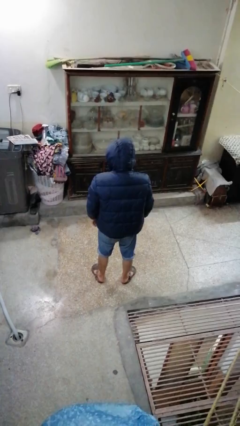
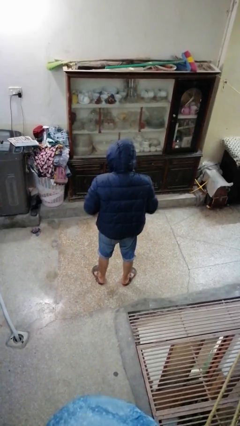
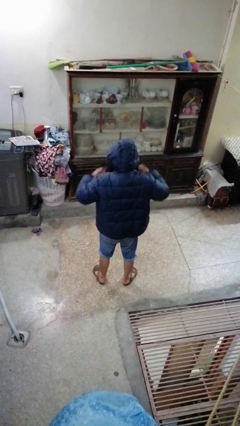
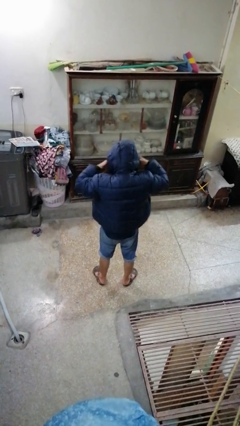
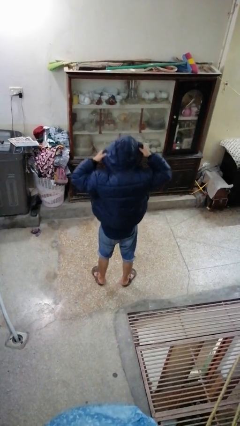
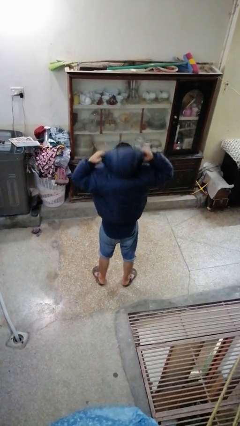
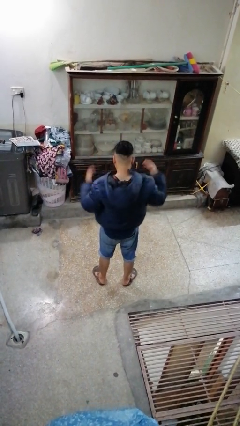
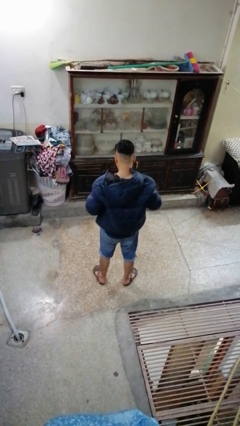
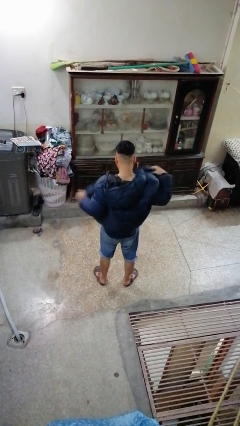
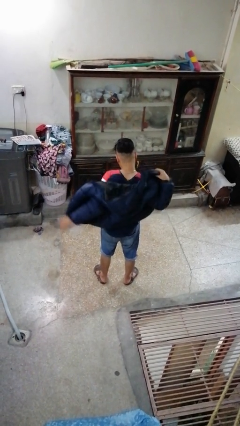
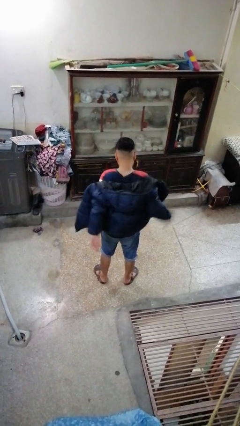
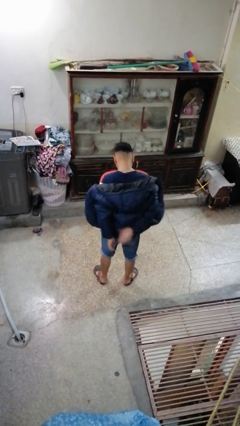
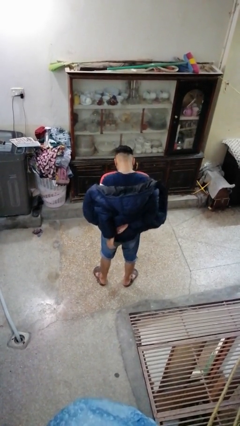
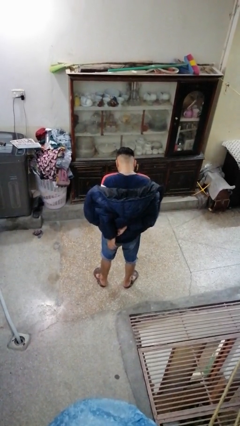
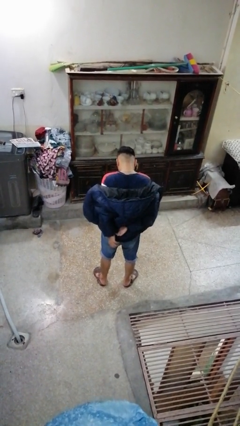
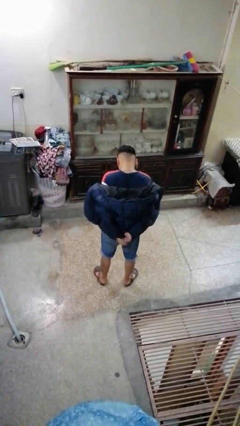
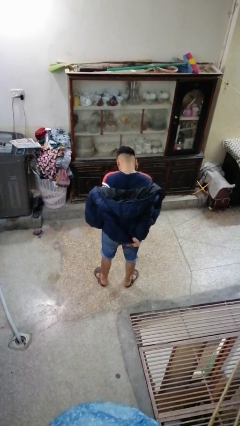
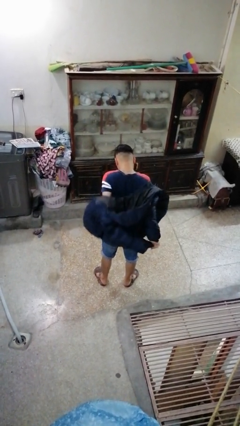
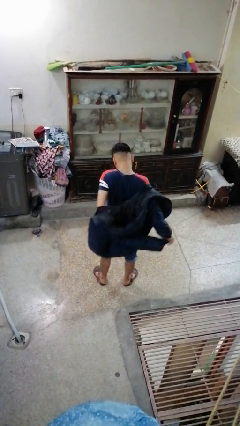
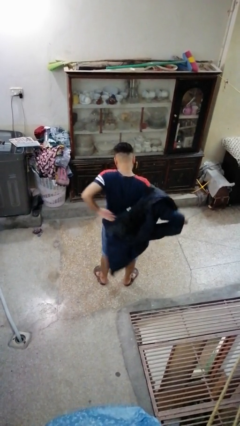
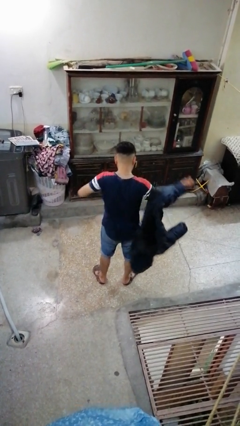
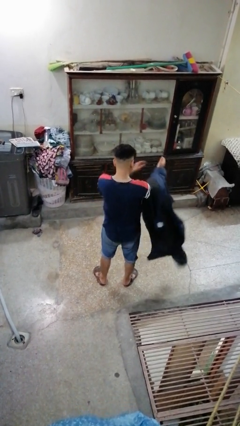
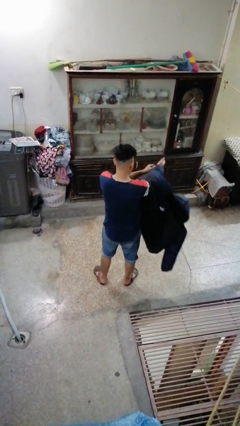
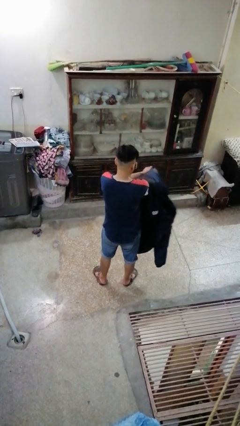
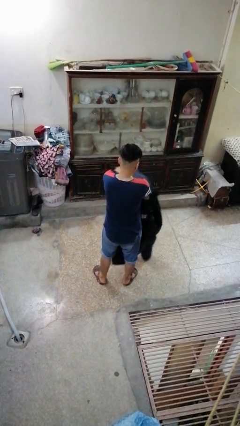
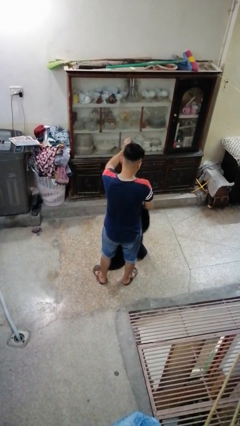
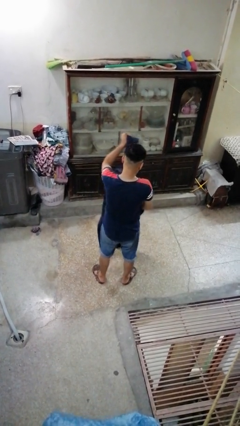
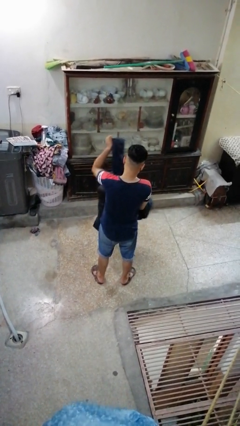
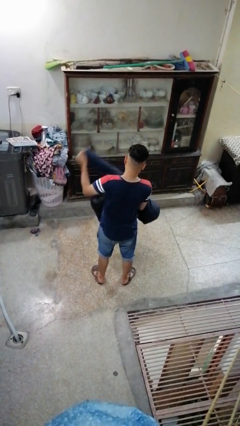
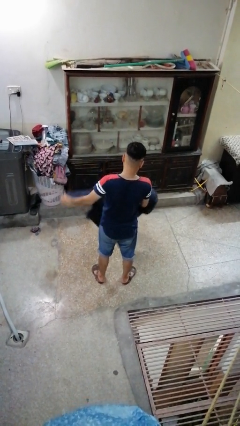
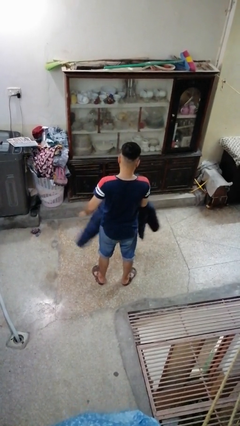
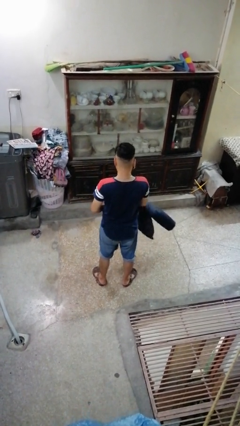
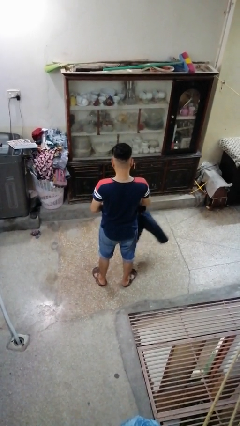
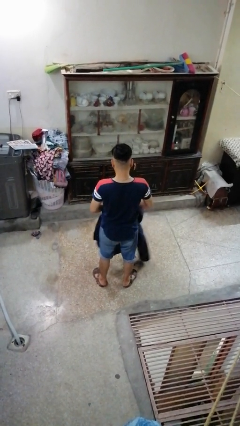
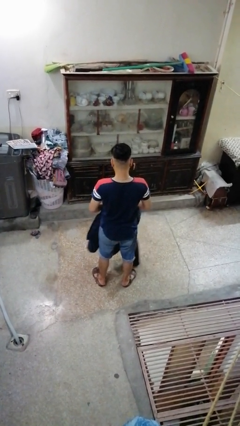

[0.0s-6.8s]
person takes off hoodie

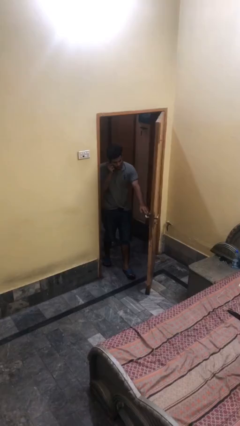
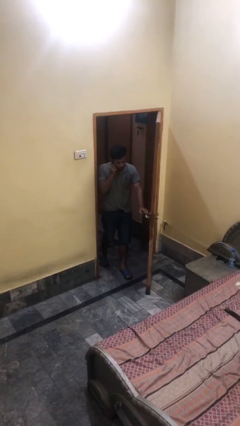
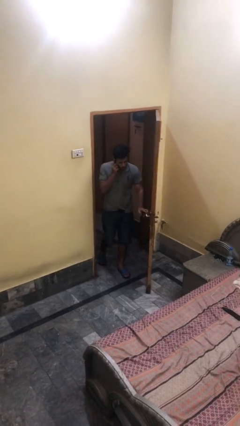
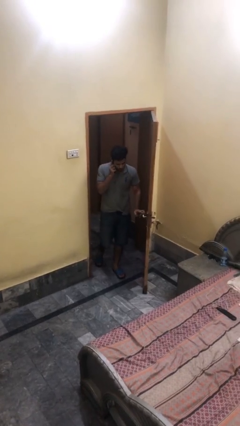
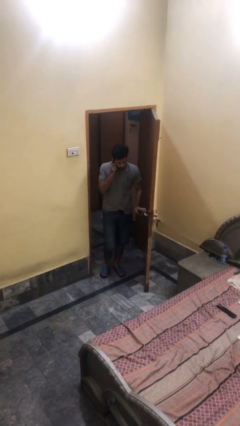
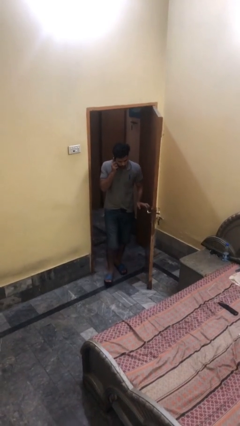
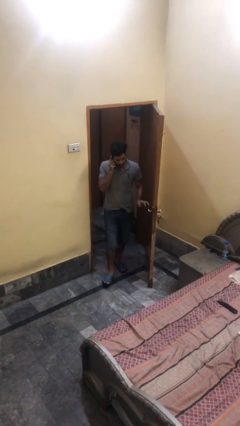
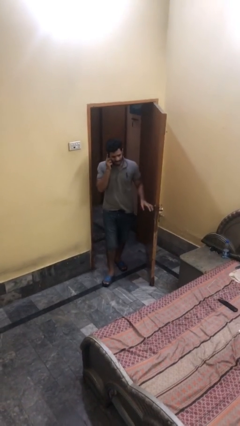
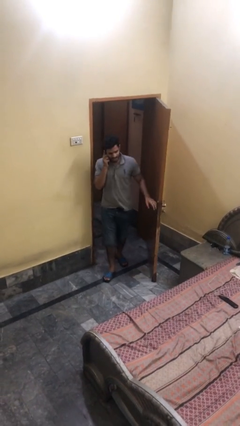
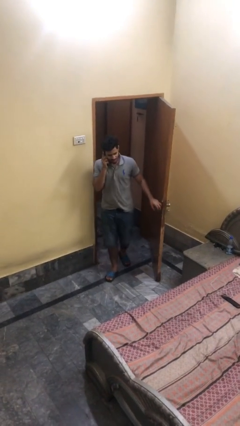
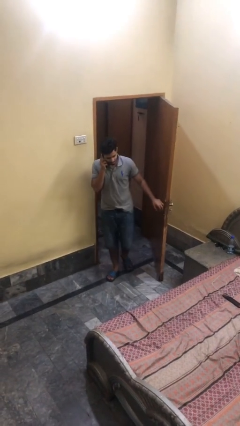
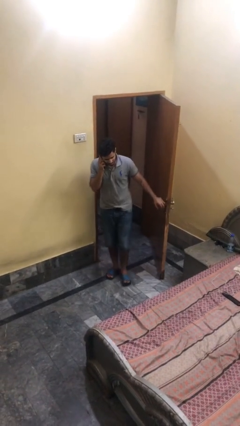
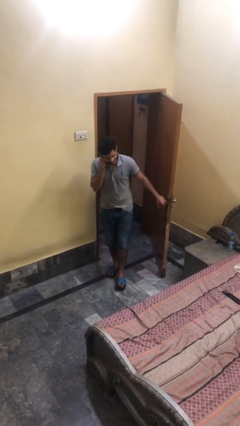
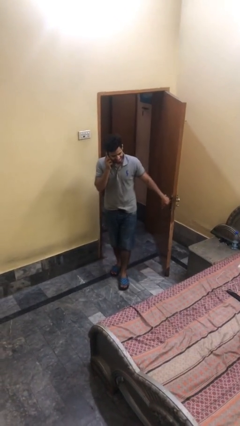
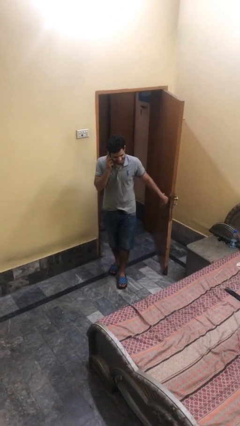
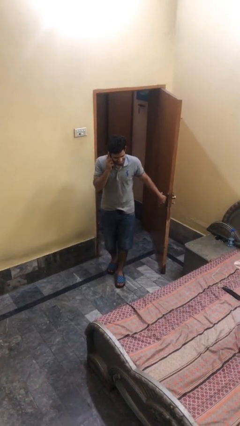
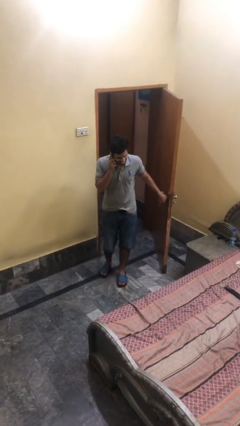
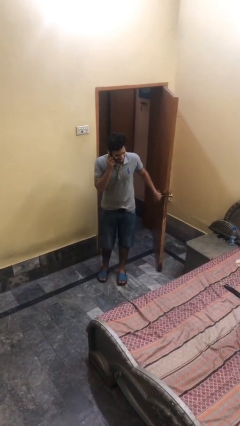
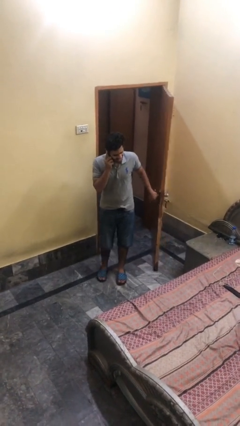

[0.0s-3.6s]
person enters scene through structure

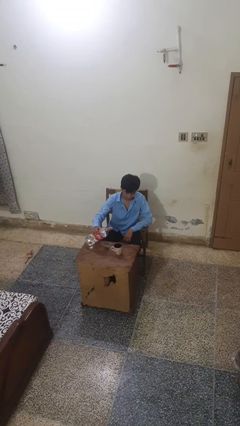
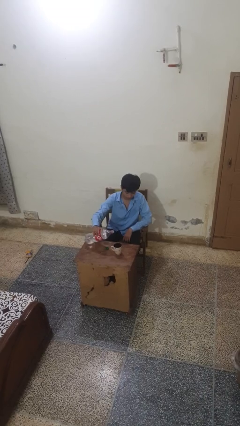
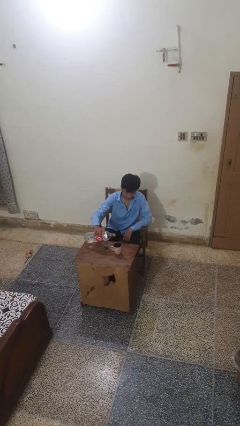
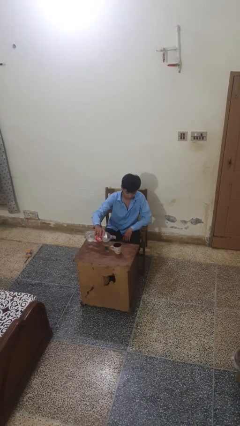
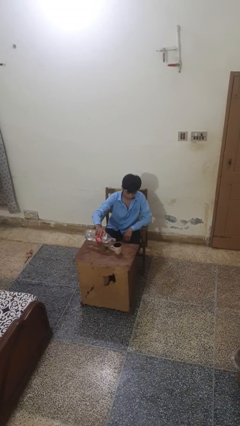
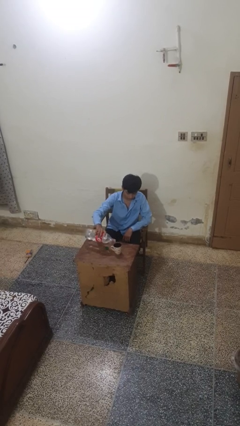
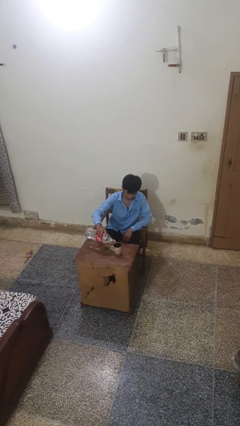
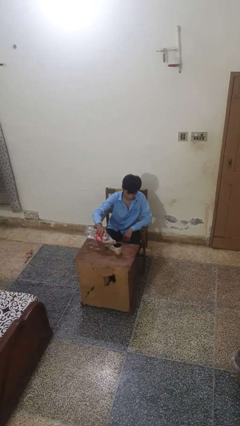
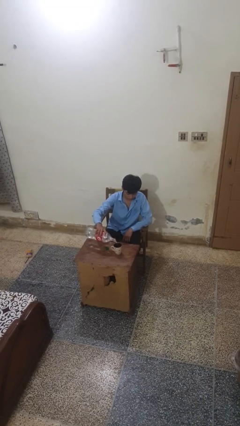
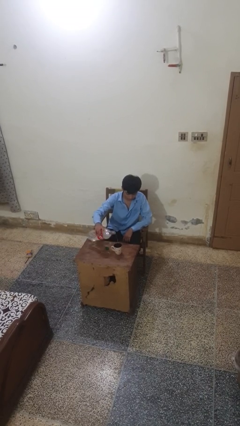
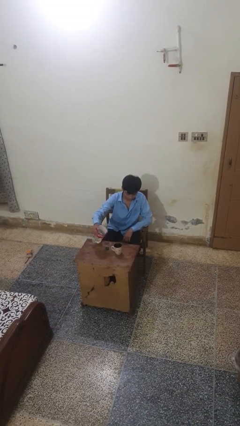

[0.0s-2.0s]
person pours liquid into cup

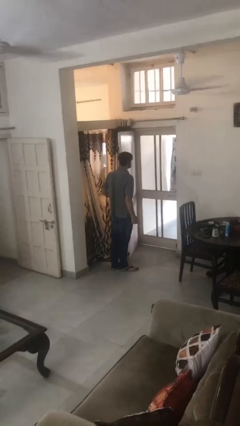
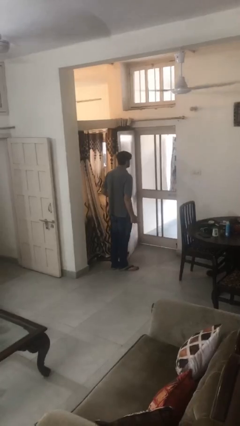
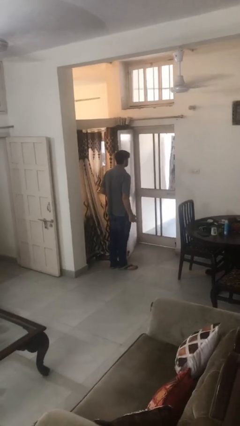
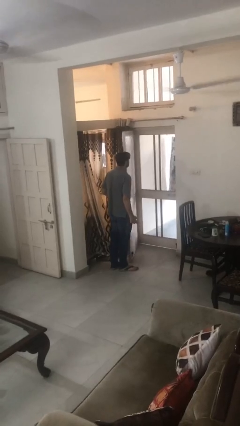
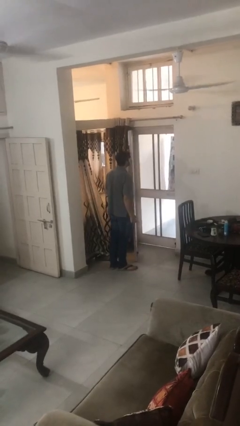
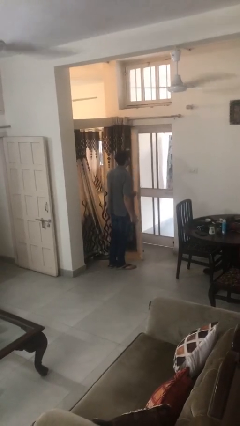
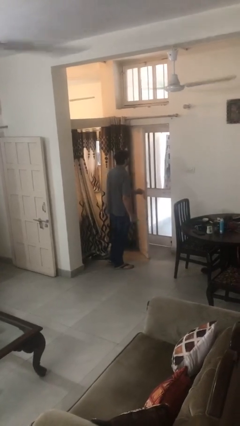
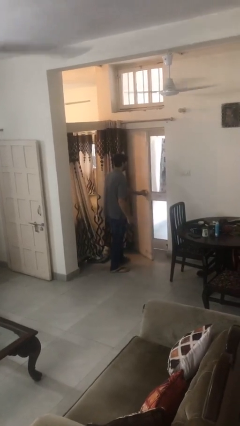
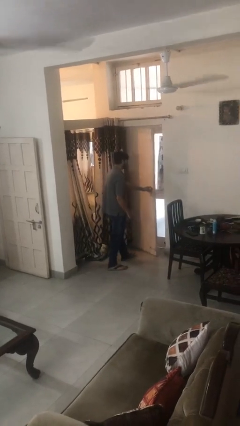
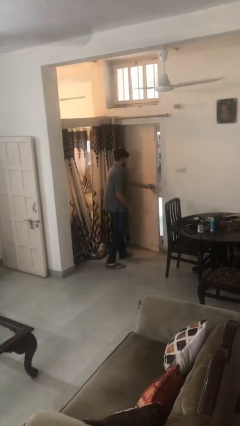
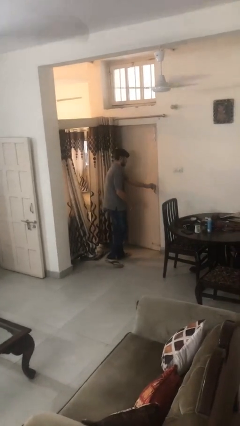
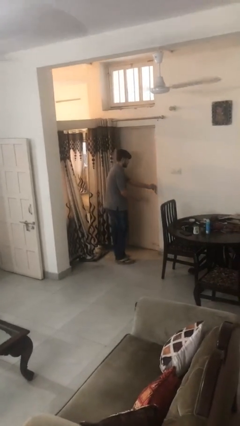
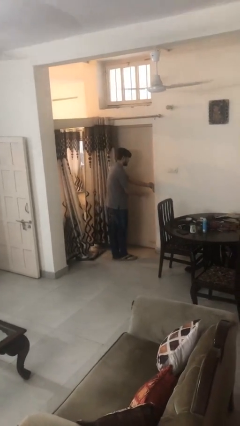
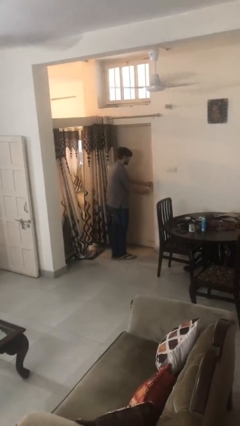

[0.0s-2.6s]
person closes facility door

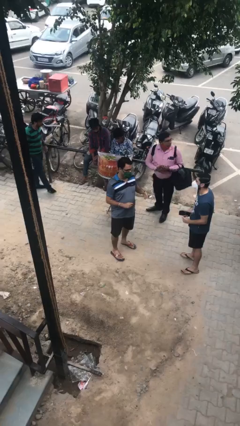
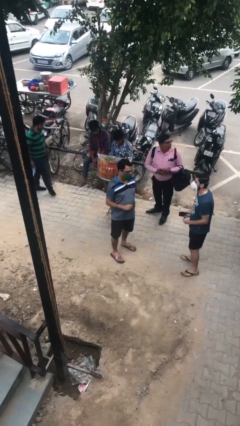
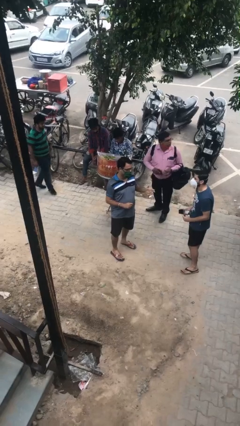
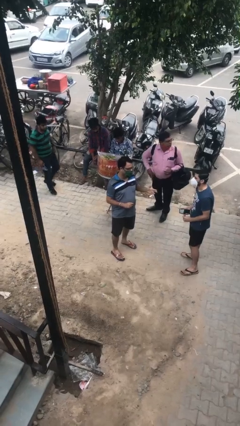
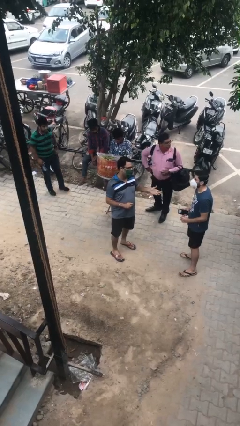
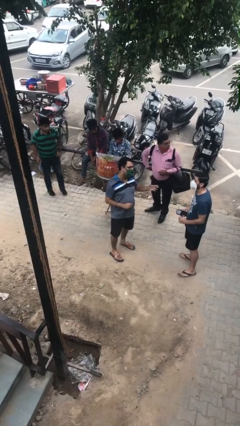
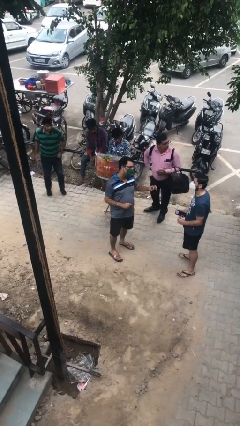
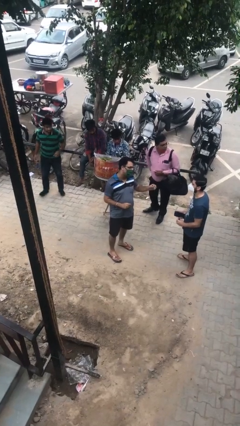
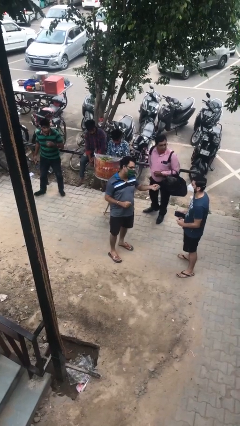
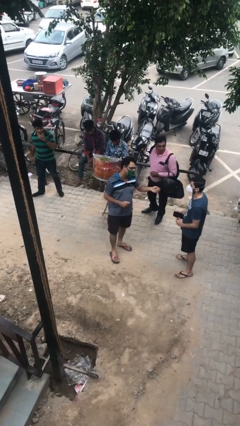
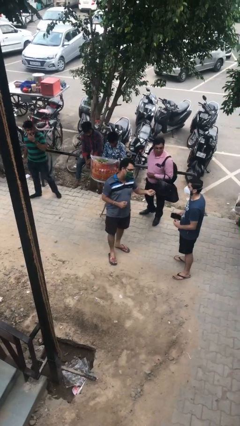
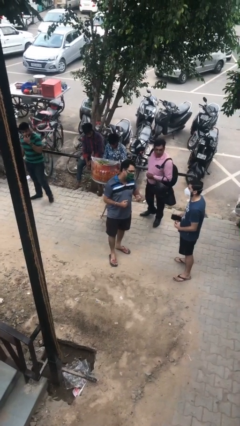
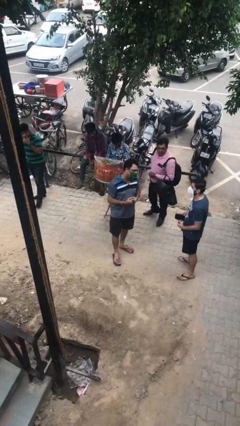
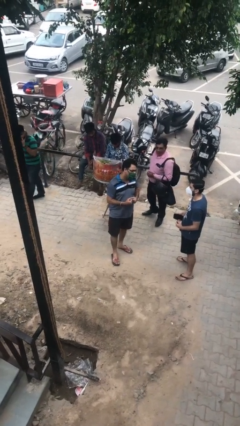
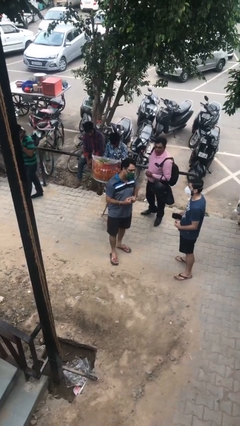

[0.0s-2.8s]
person talks to person
